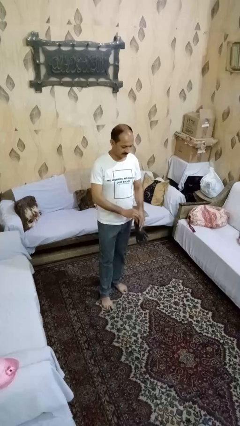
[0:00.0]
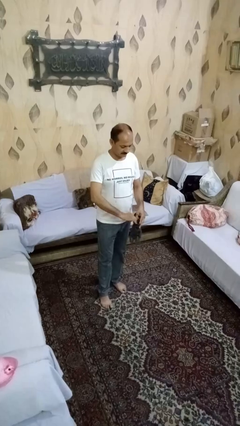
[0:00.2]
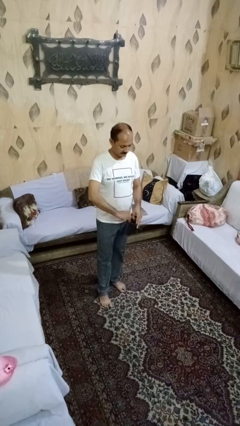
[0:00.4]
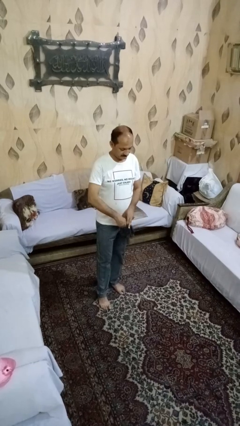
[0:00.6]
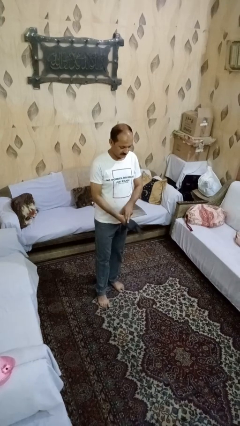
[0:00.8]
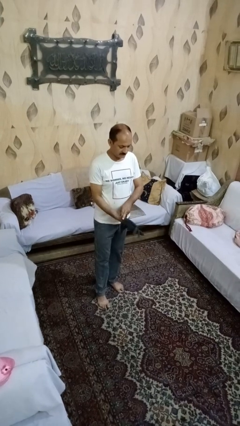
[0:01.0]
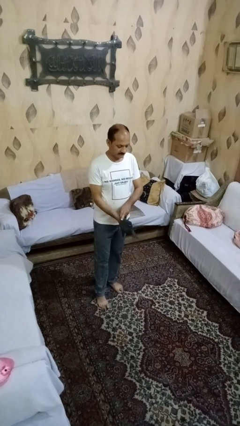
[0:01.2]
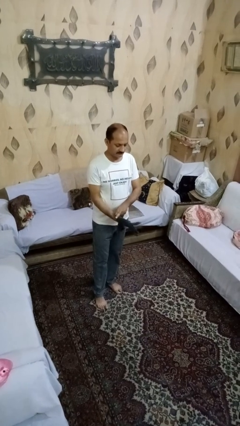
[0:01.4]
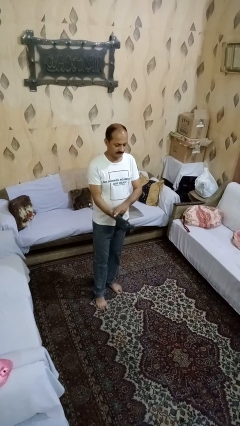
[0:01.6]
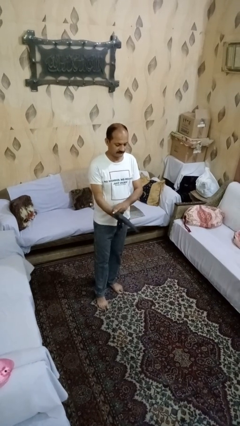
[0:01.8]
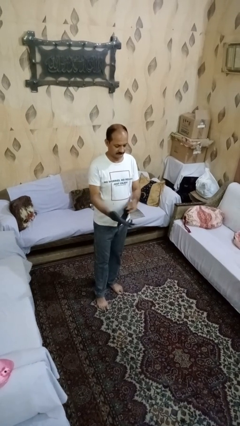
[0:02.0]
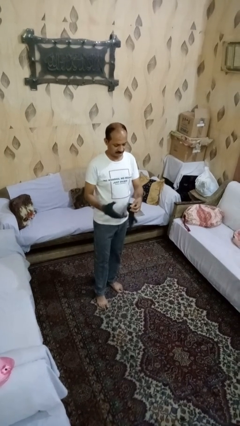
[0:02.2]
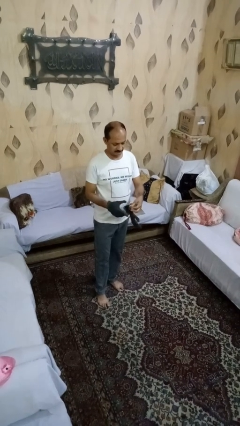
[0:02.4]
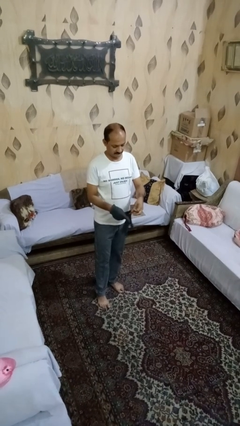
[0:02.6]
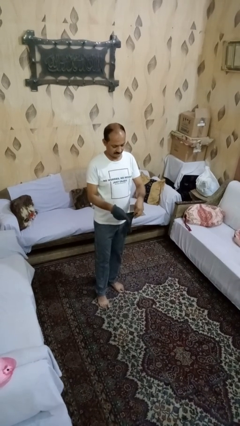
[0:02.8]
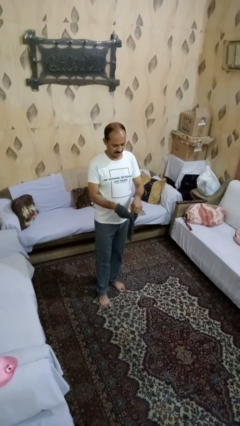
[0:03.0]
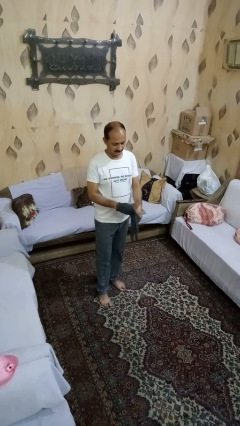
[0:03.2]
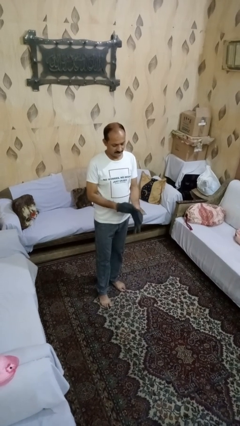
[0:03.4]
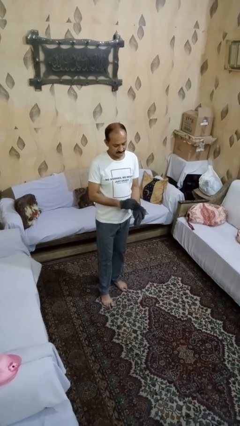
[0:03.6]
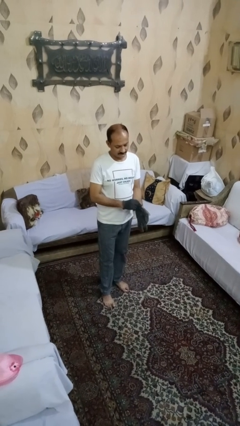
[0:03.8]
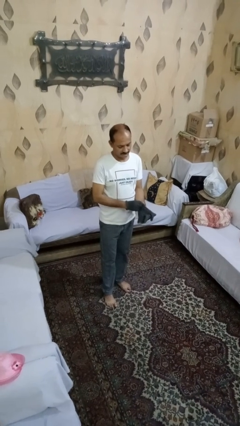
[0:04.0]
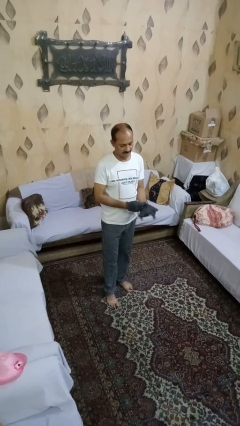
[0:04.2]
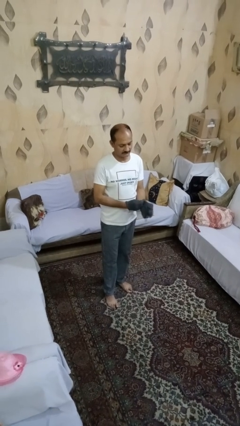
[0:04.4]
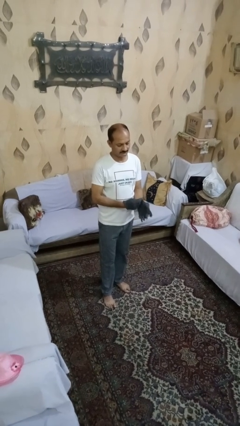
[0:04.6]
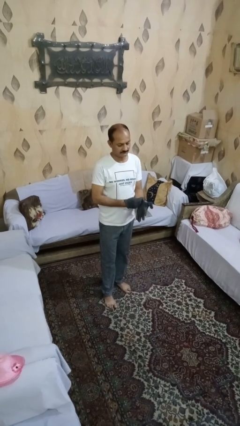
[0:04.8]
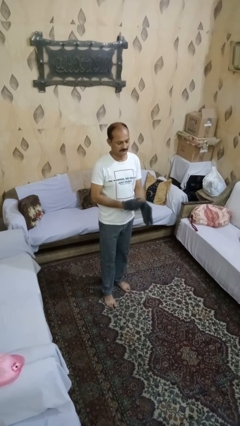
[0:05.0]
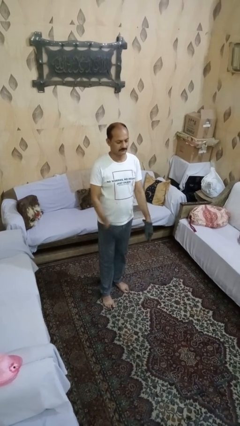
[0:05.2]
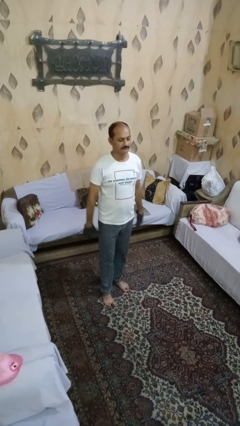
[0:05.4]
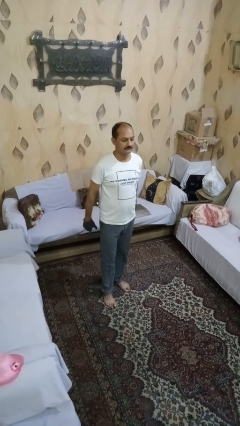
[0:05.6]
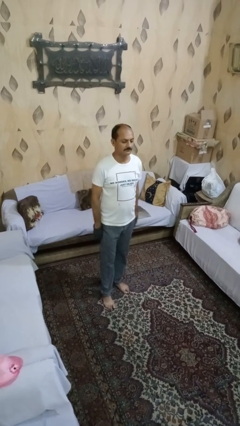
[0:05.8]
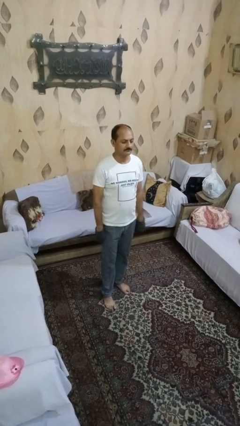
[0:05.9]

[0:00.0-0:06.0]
person puts on gloves

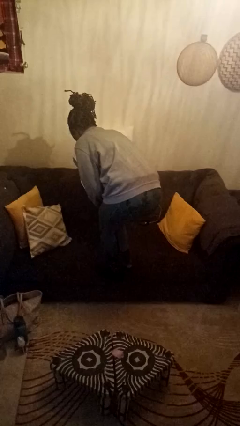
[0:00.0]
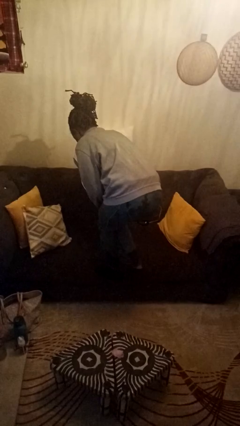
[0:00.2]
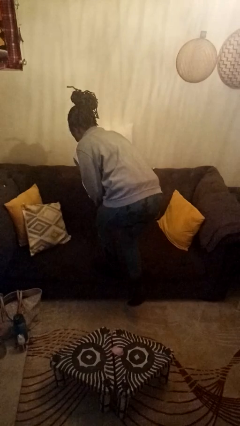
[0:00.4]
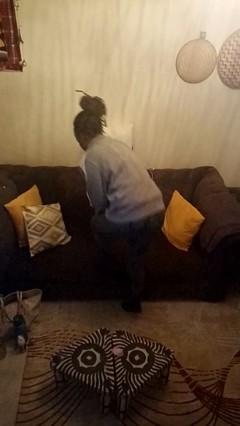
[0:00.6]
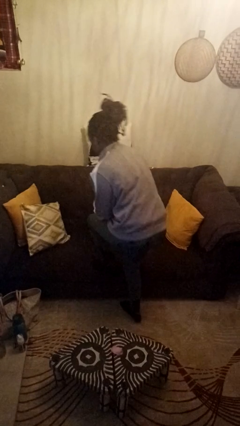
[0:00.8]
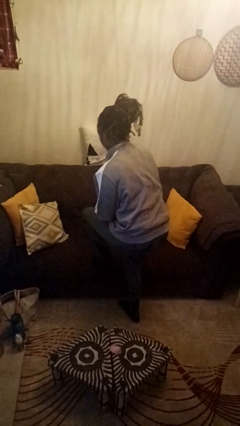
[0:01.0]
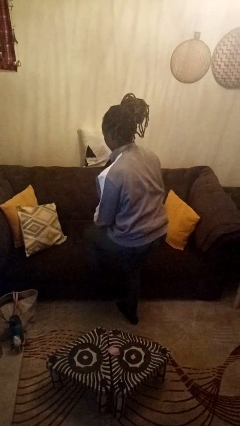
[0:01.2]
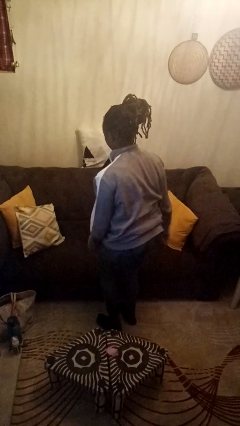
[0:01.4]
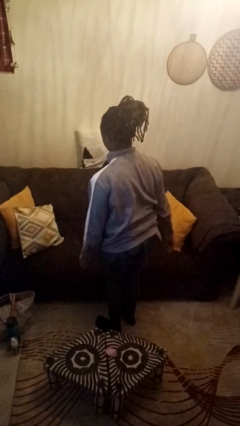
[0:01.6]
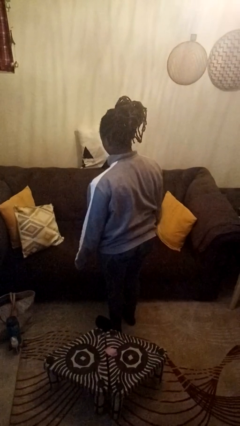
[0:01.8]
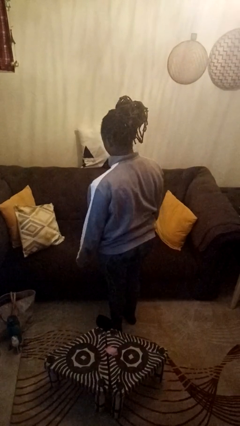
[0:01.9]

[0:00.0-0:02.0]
person climbs off couch

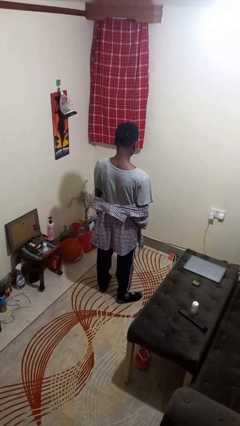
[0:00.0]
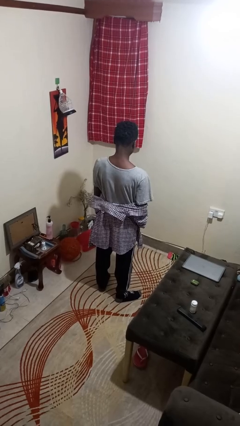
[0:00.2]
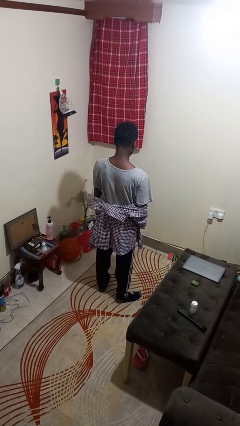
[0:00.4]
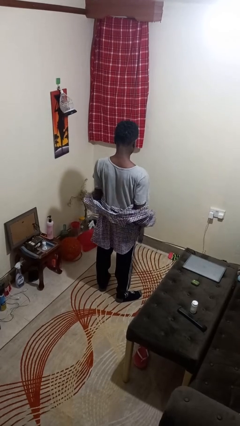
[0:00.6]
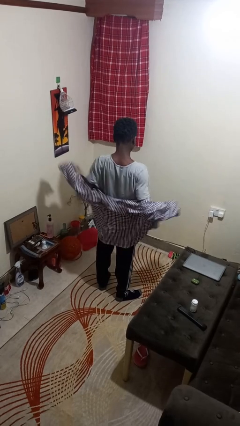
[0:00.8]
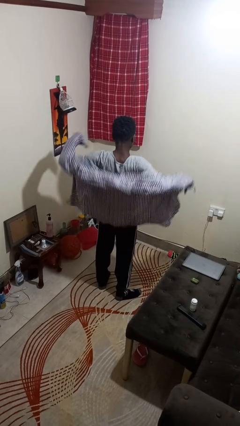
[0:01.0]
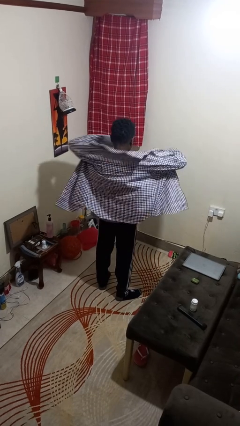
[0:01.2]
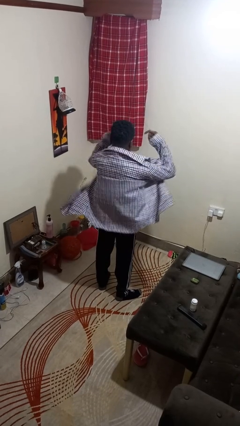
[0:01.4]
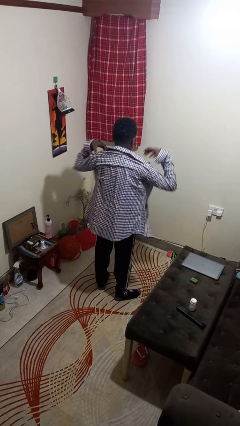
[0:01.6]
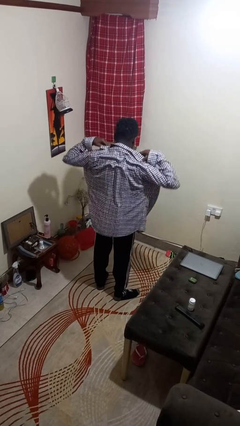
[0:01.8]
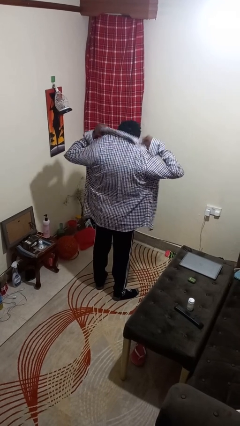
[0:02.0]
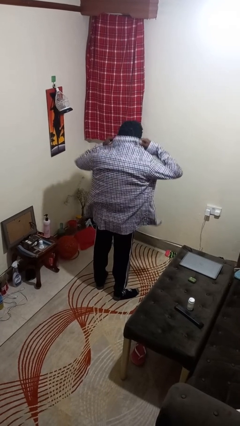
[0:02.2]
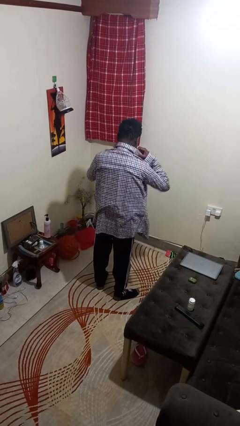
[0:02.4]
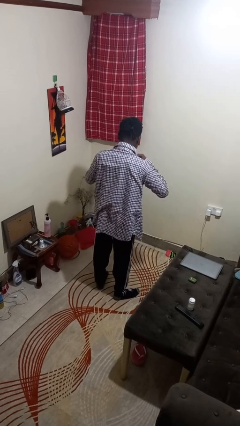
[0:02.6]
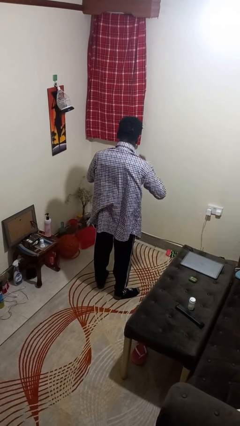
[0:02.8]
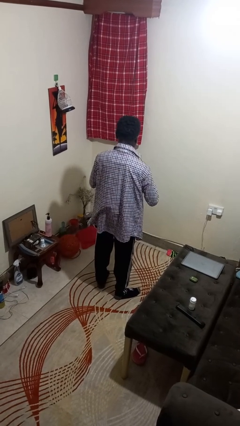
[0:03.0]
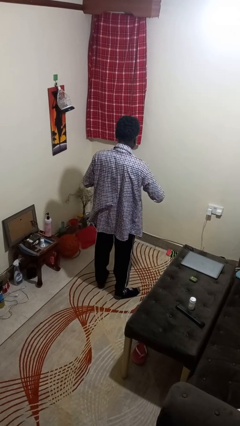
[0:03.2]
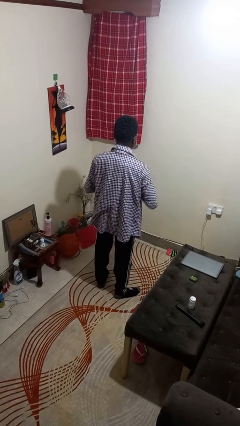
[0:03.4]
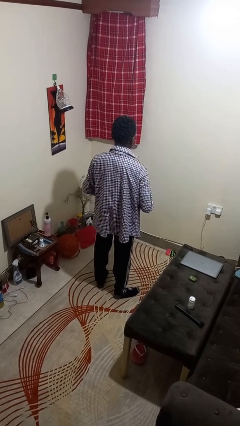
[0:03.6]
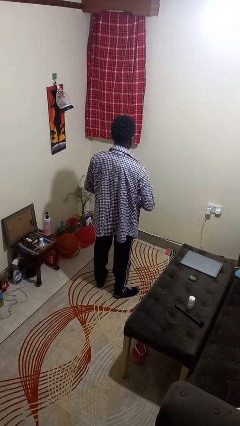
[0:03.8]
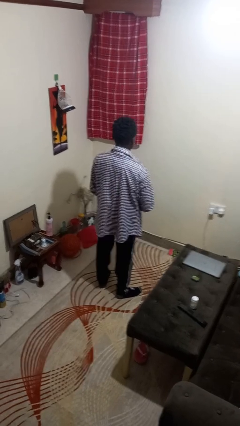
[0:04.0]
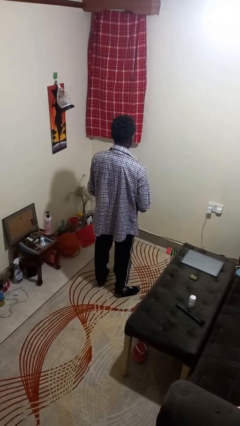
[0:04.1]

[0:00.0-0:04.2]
person puts on shirt

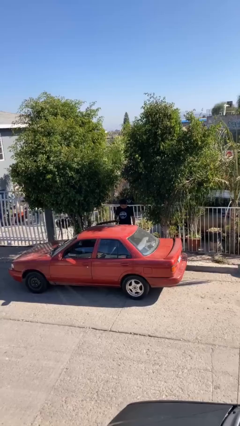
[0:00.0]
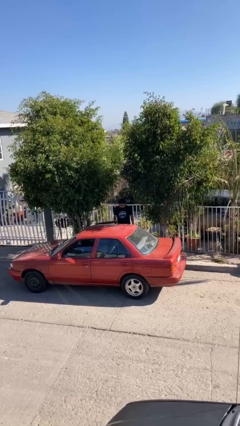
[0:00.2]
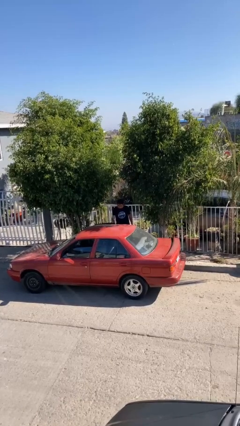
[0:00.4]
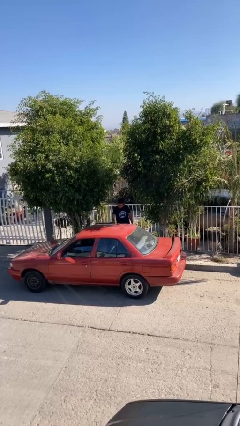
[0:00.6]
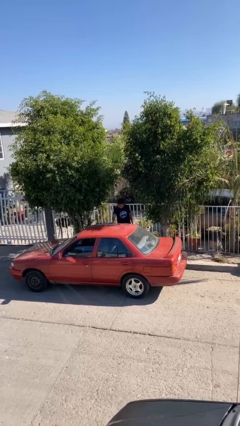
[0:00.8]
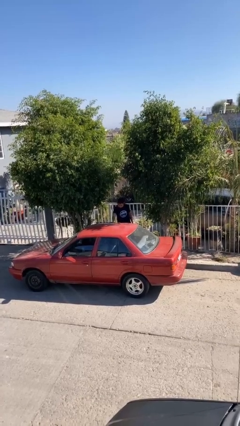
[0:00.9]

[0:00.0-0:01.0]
person closes car door

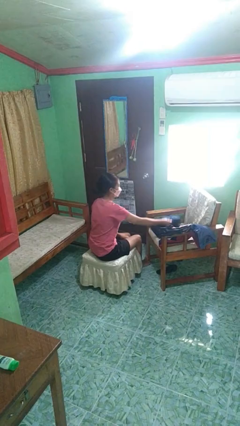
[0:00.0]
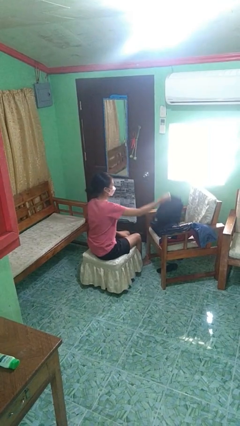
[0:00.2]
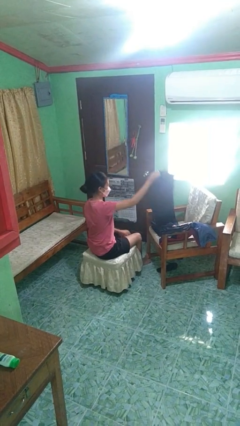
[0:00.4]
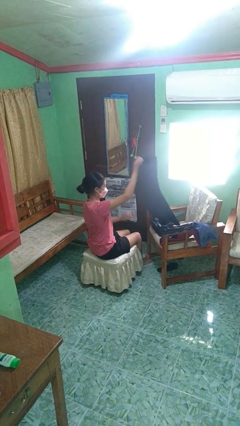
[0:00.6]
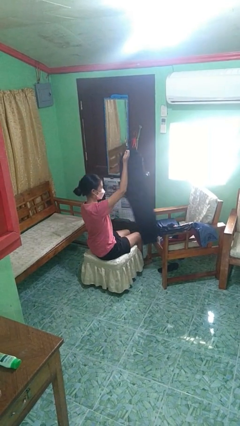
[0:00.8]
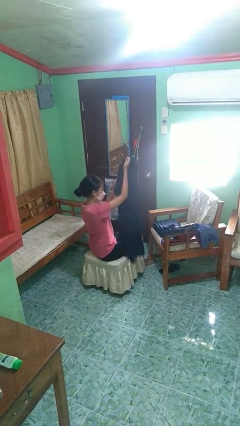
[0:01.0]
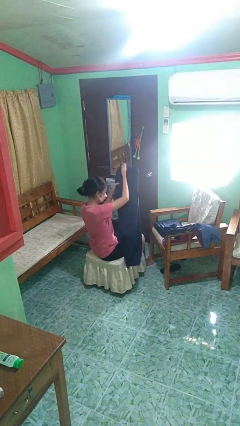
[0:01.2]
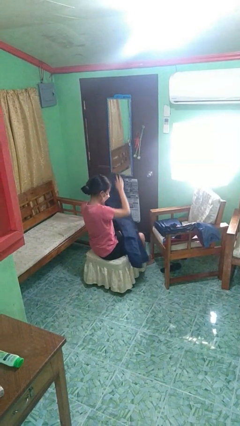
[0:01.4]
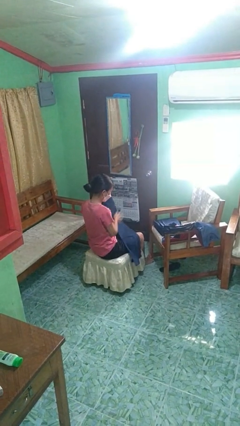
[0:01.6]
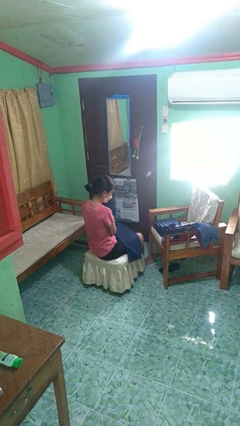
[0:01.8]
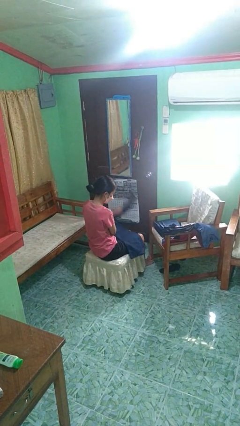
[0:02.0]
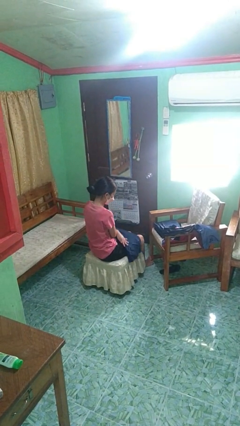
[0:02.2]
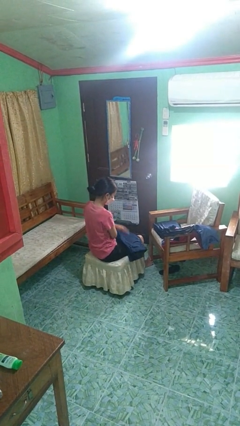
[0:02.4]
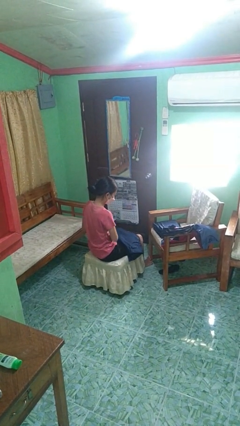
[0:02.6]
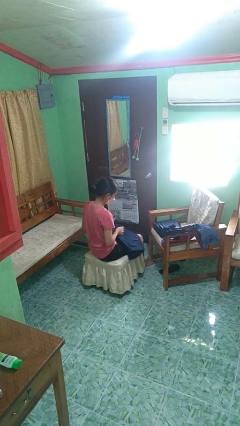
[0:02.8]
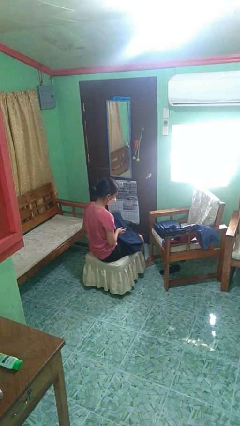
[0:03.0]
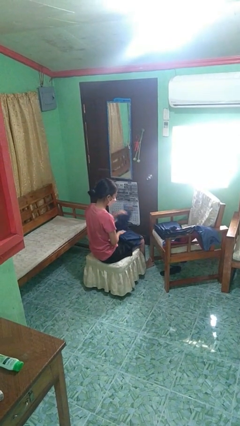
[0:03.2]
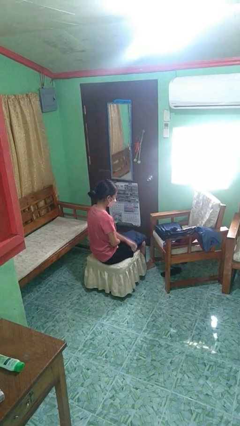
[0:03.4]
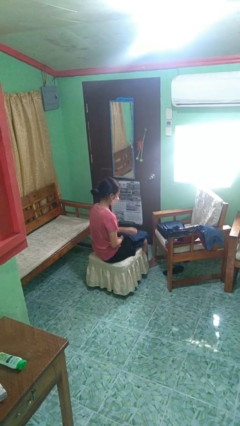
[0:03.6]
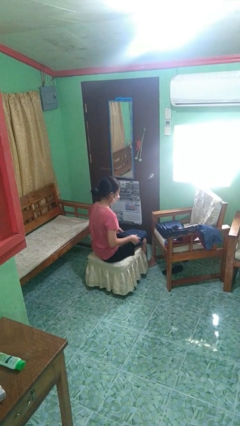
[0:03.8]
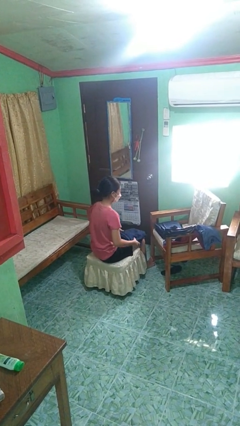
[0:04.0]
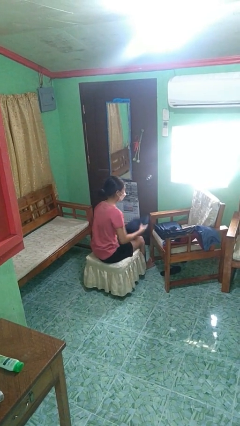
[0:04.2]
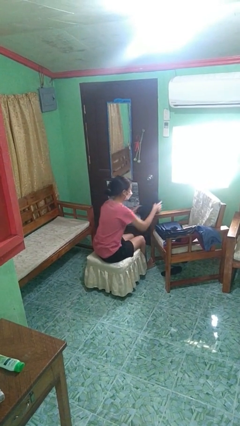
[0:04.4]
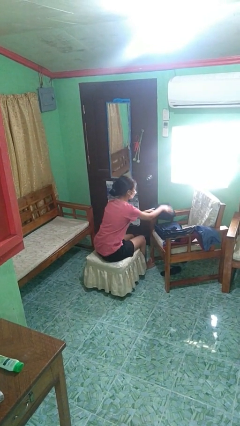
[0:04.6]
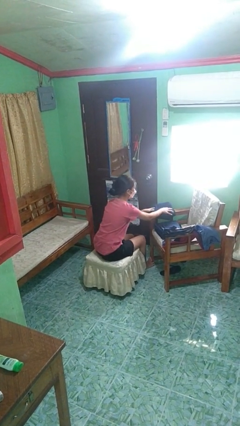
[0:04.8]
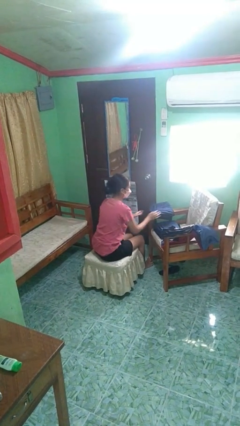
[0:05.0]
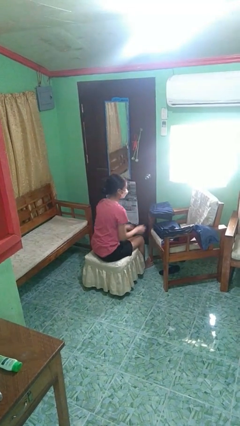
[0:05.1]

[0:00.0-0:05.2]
person folds pants
